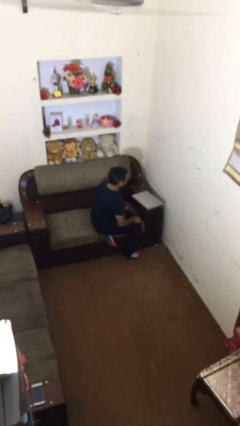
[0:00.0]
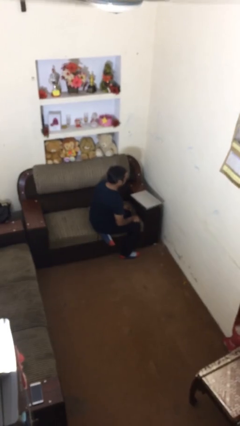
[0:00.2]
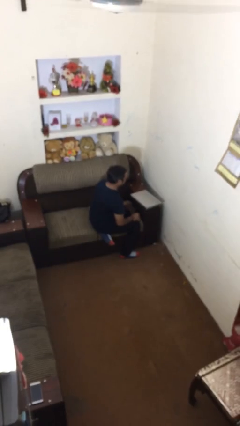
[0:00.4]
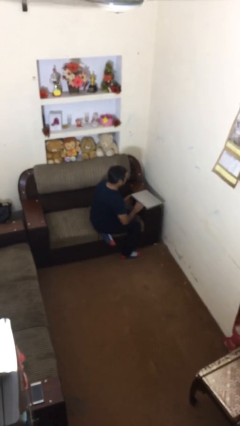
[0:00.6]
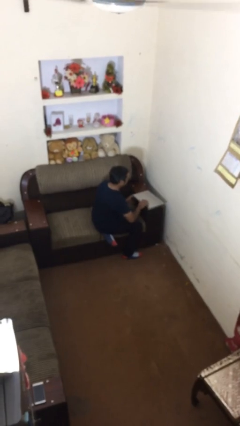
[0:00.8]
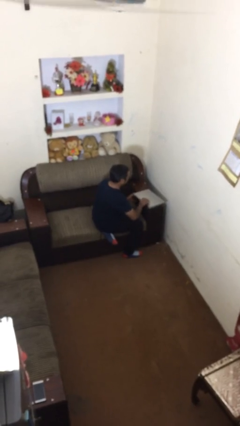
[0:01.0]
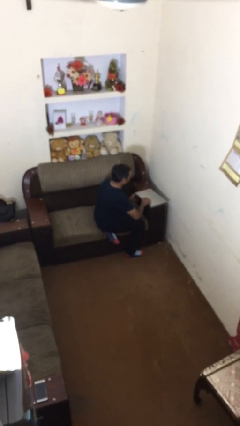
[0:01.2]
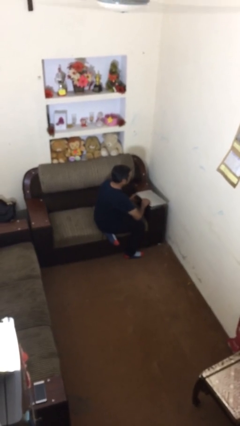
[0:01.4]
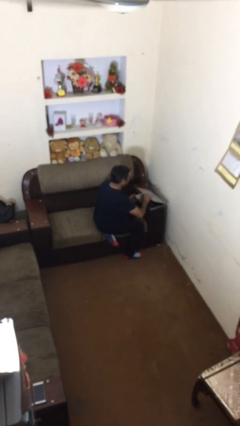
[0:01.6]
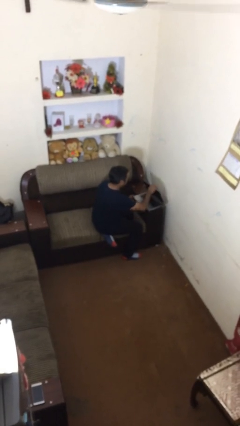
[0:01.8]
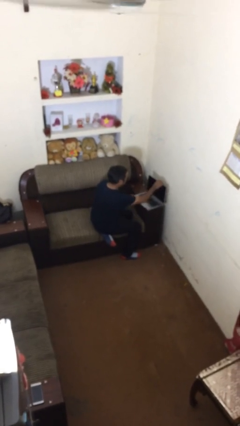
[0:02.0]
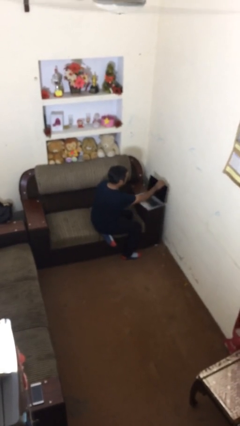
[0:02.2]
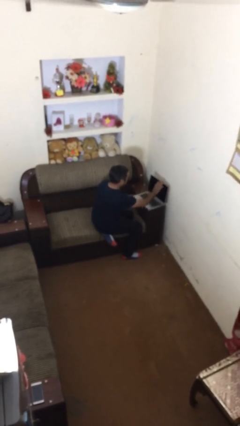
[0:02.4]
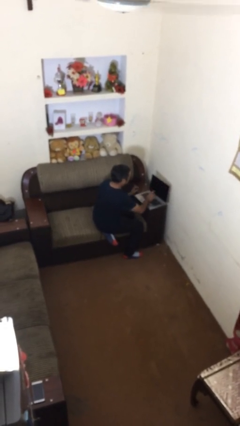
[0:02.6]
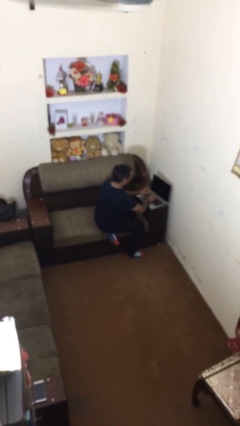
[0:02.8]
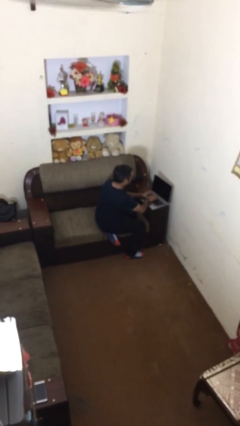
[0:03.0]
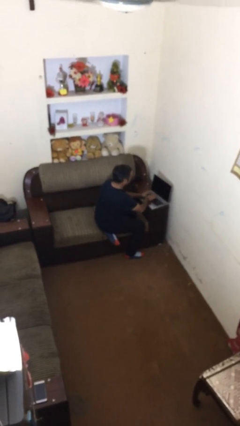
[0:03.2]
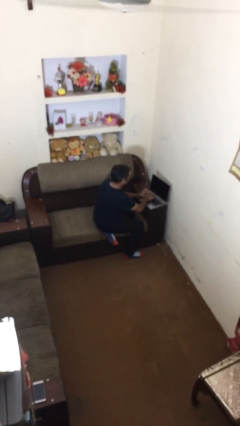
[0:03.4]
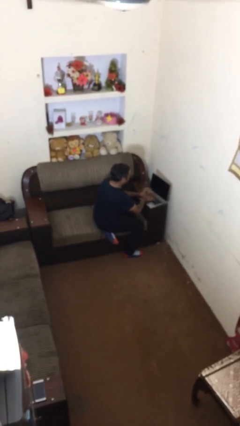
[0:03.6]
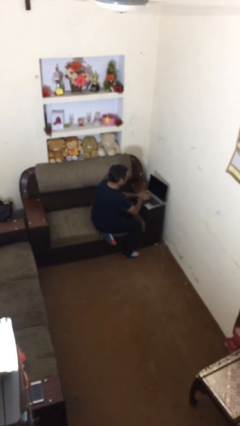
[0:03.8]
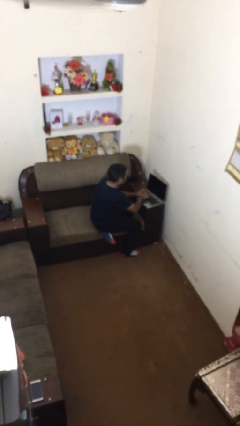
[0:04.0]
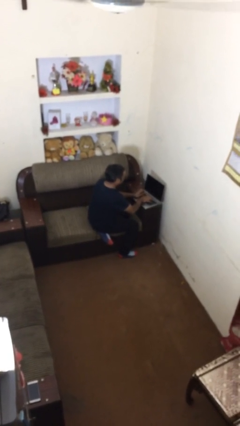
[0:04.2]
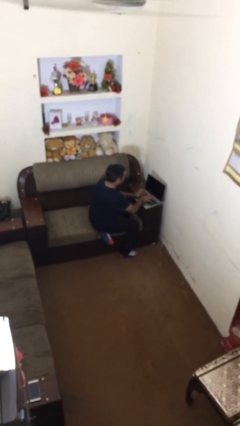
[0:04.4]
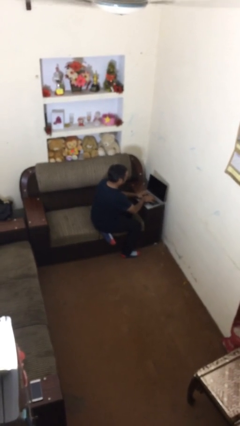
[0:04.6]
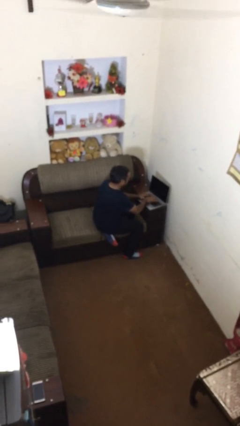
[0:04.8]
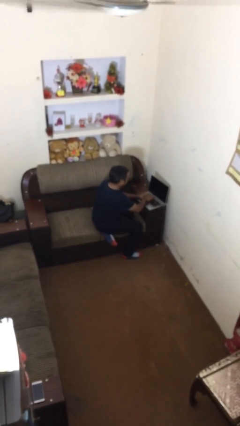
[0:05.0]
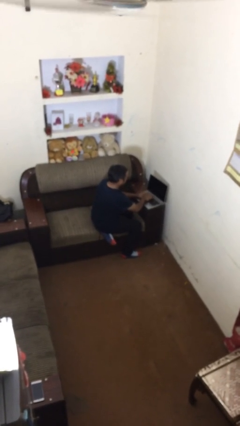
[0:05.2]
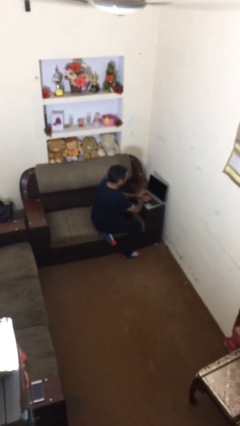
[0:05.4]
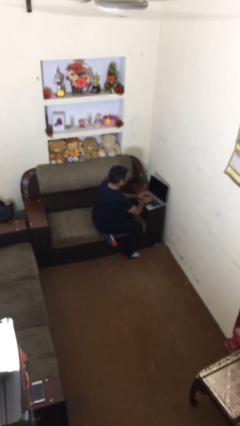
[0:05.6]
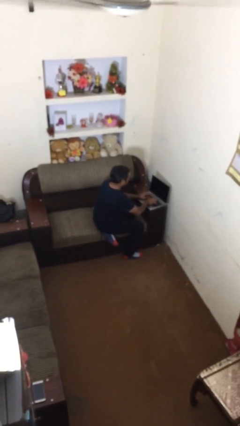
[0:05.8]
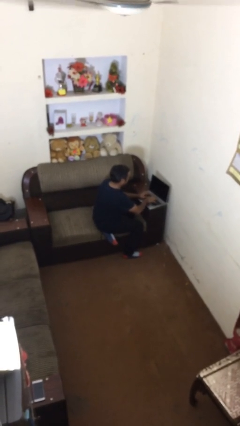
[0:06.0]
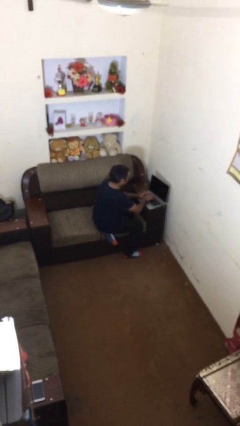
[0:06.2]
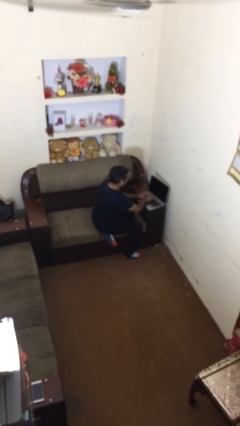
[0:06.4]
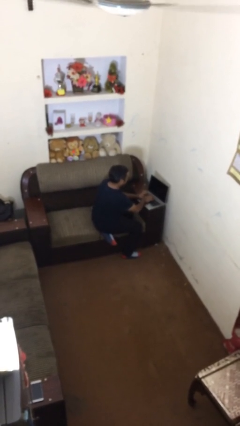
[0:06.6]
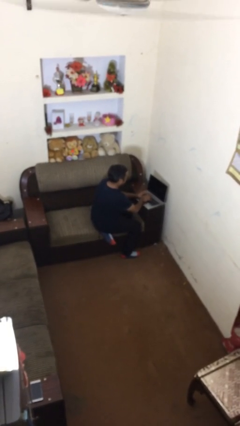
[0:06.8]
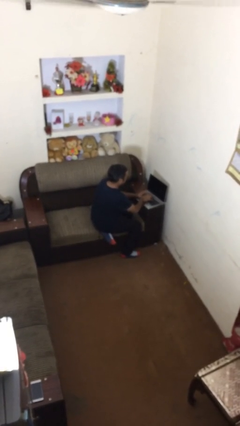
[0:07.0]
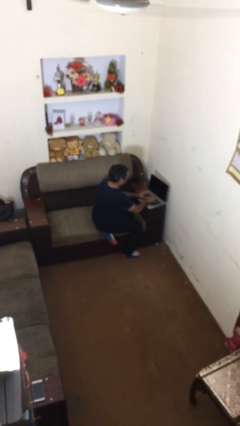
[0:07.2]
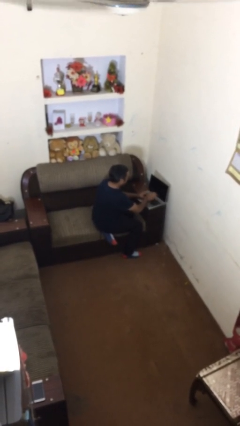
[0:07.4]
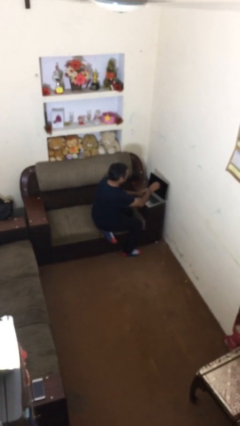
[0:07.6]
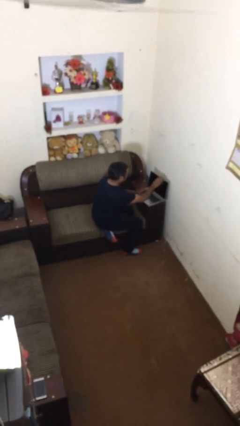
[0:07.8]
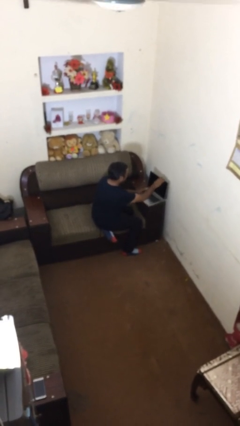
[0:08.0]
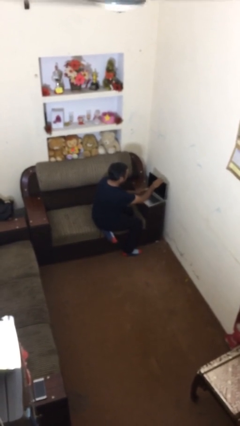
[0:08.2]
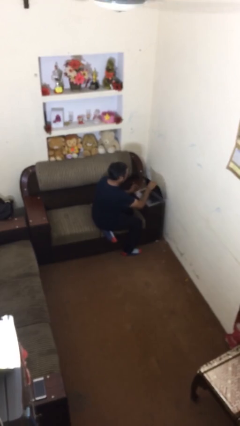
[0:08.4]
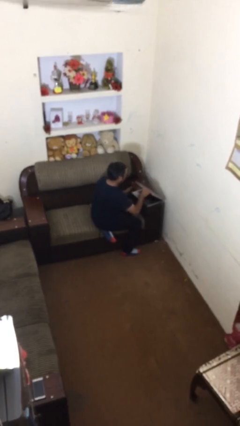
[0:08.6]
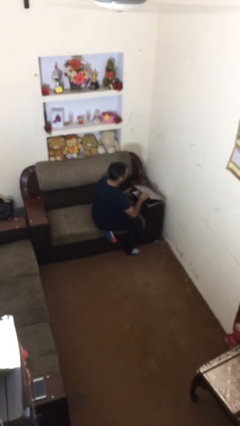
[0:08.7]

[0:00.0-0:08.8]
person interacts with laptop

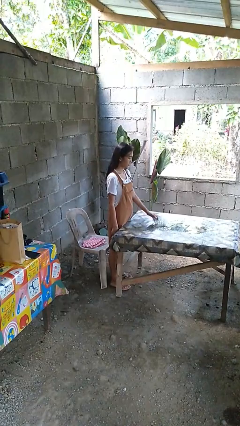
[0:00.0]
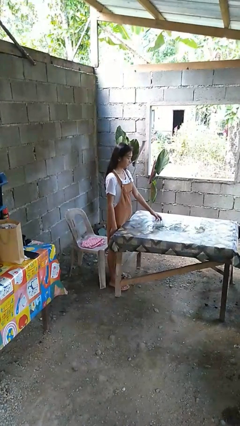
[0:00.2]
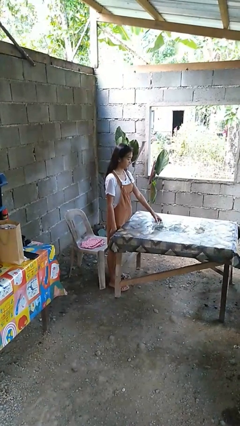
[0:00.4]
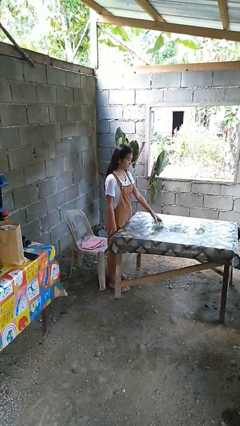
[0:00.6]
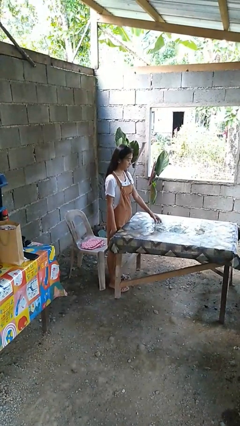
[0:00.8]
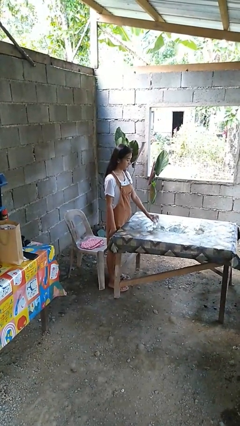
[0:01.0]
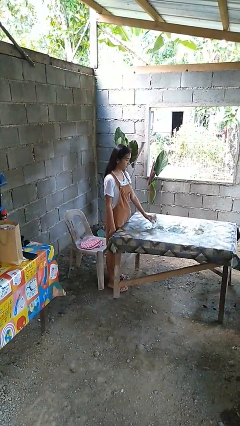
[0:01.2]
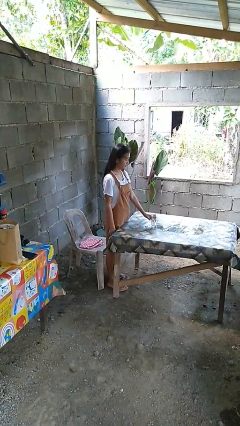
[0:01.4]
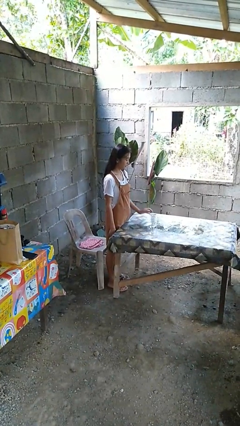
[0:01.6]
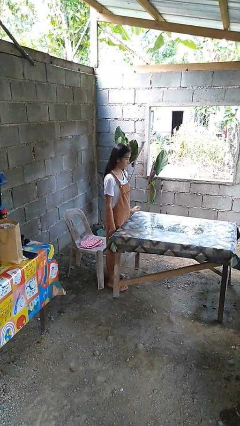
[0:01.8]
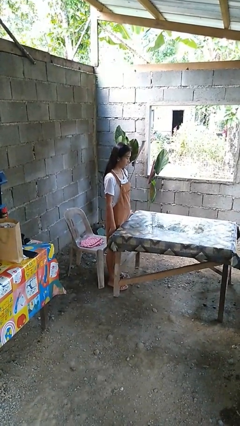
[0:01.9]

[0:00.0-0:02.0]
person sets upright glass

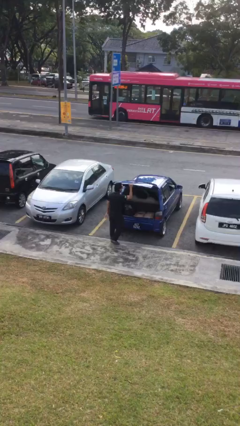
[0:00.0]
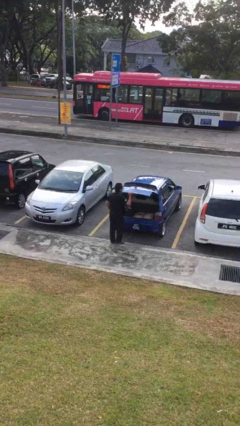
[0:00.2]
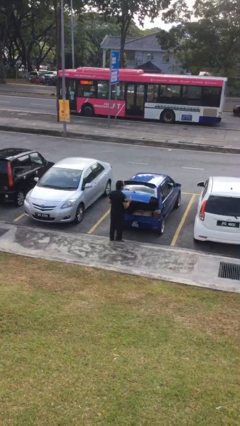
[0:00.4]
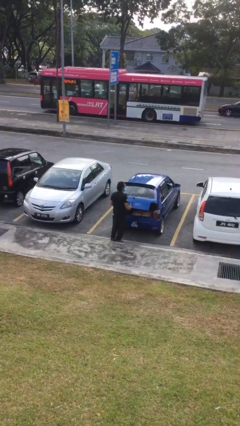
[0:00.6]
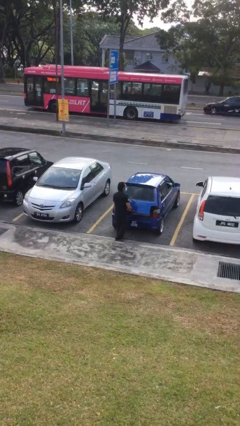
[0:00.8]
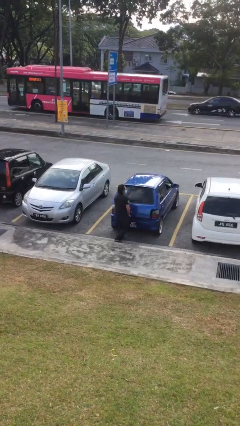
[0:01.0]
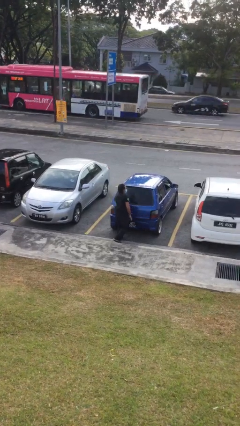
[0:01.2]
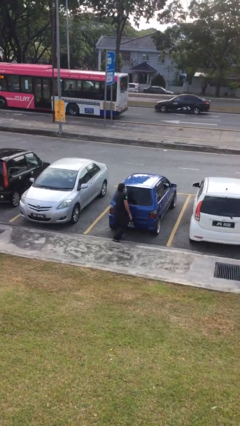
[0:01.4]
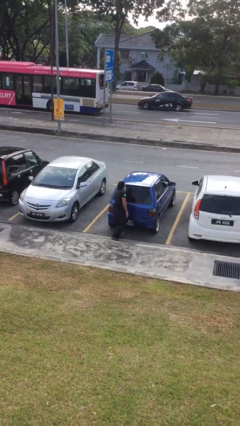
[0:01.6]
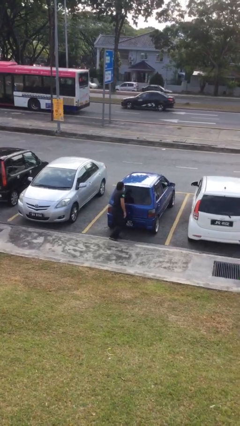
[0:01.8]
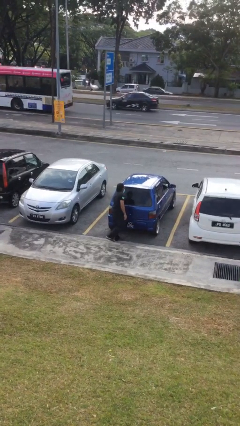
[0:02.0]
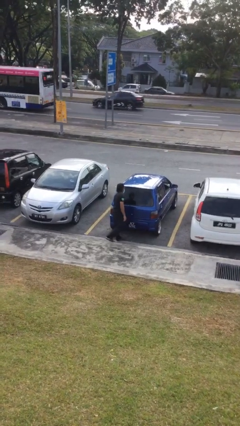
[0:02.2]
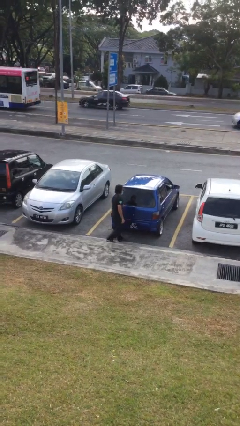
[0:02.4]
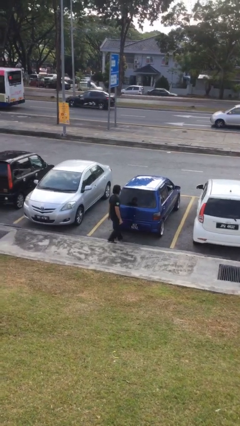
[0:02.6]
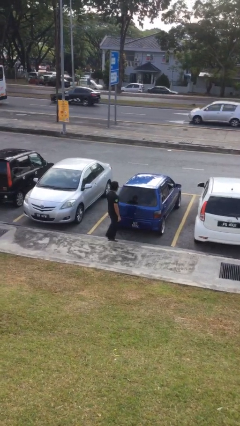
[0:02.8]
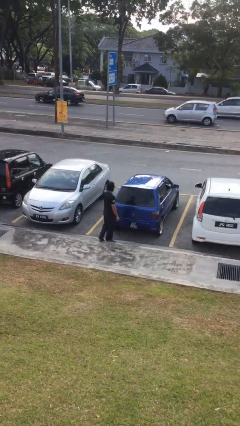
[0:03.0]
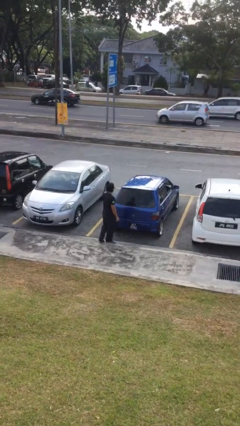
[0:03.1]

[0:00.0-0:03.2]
person closes car trunk

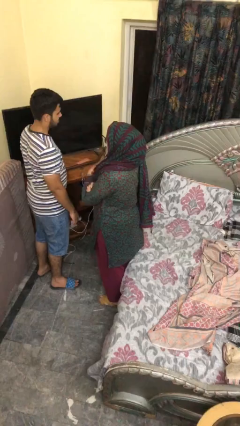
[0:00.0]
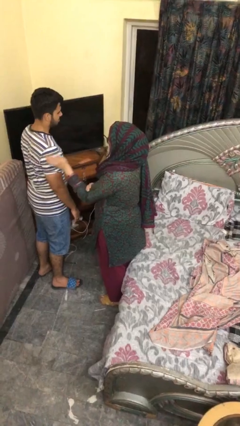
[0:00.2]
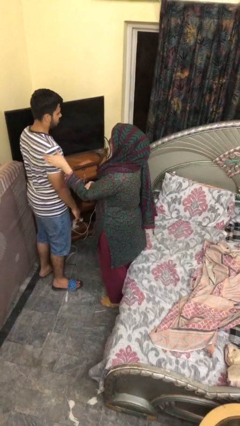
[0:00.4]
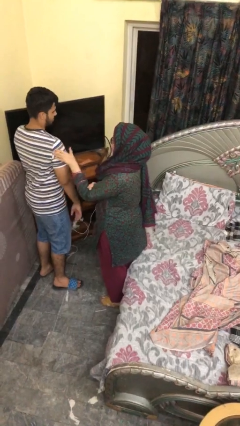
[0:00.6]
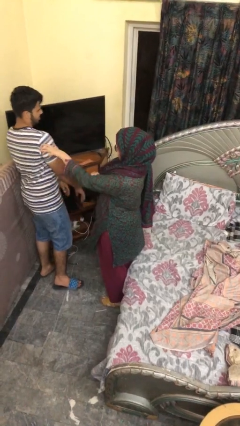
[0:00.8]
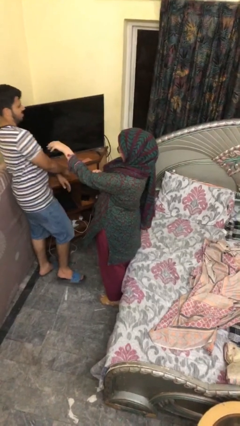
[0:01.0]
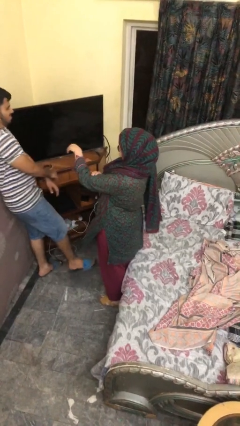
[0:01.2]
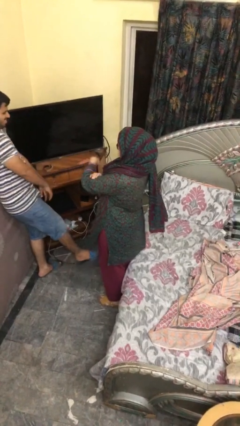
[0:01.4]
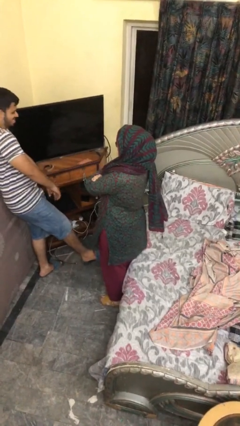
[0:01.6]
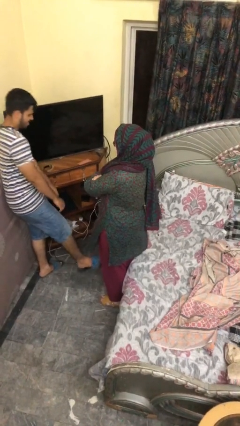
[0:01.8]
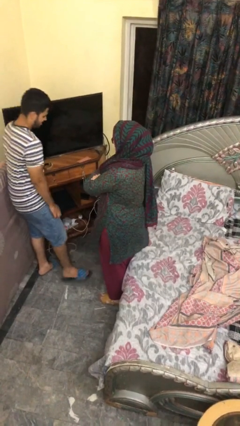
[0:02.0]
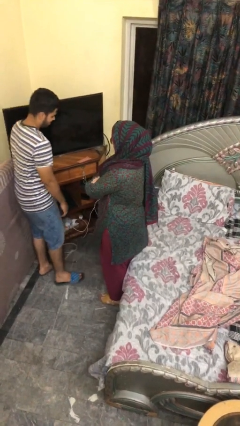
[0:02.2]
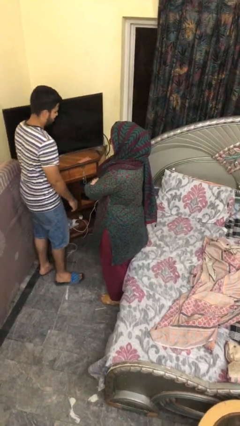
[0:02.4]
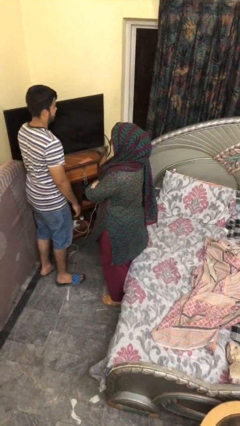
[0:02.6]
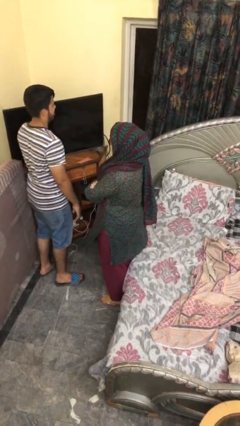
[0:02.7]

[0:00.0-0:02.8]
person shoves person

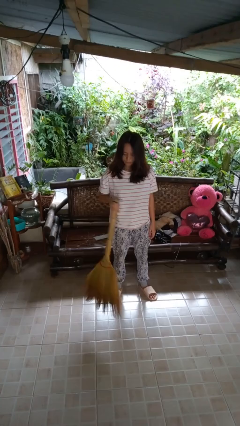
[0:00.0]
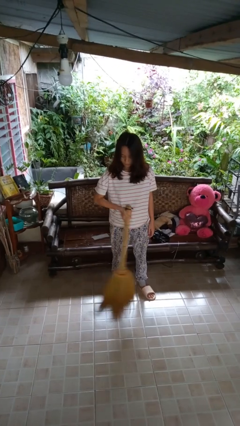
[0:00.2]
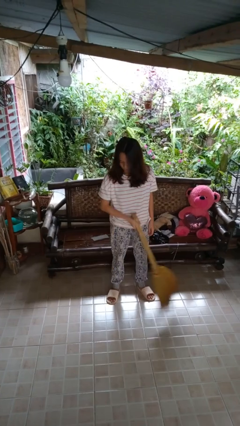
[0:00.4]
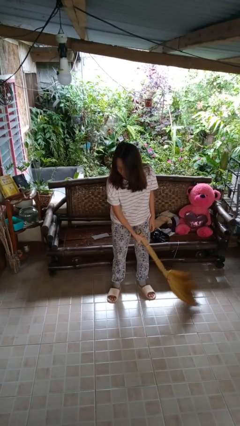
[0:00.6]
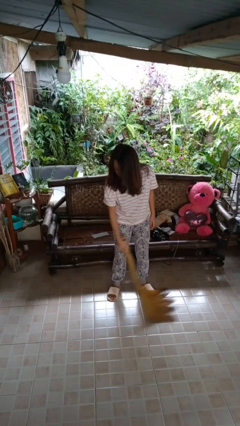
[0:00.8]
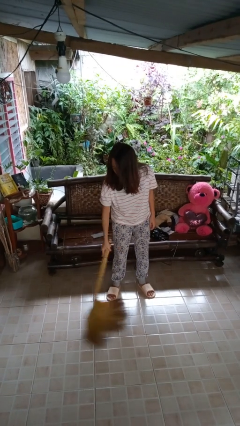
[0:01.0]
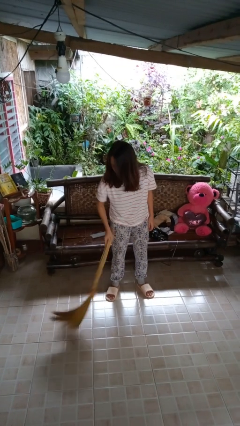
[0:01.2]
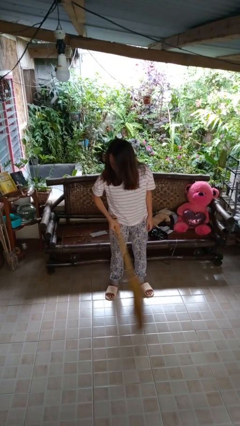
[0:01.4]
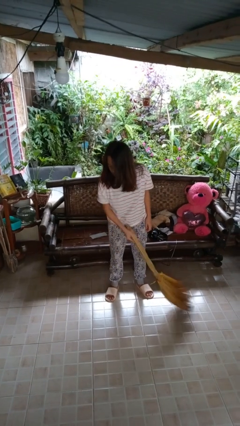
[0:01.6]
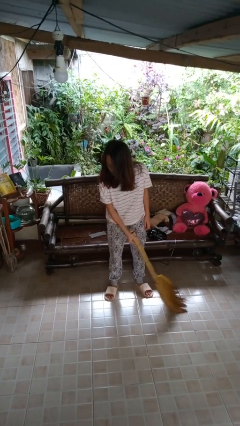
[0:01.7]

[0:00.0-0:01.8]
person sweeps floor
